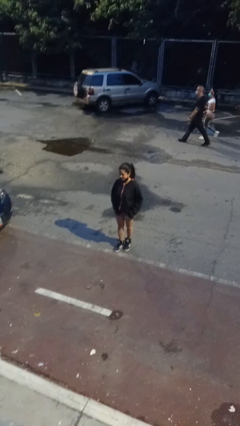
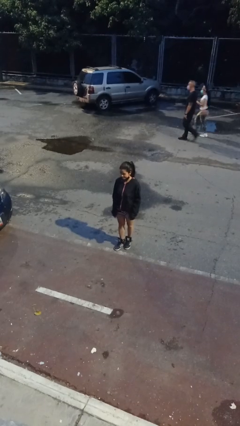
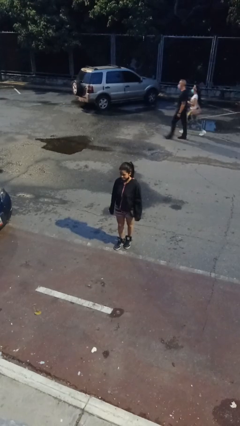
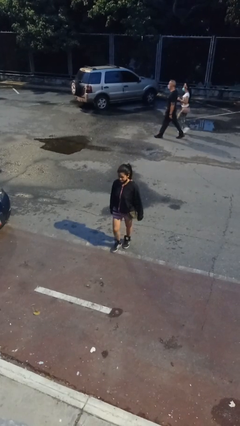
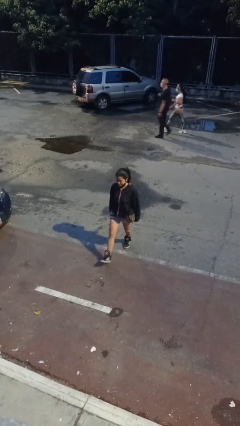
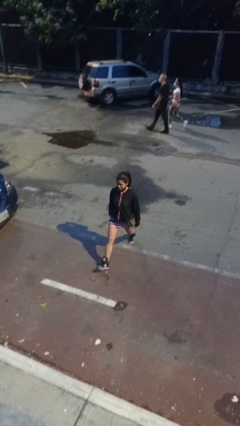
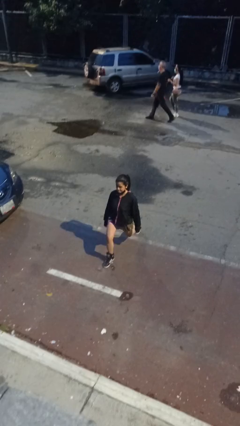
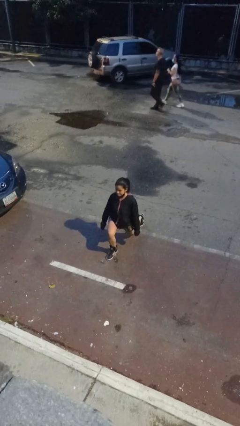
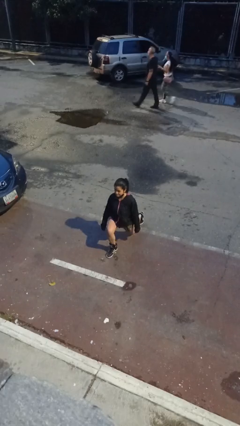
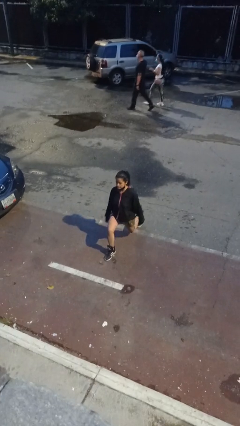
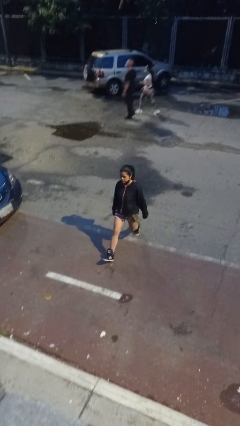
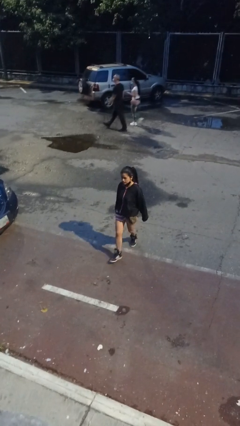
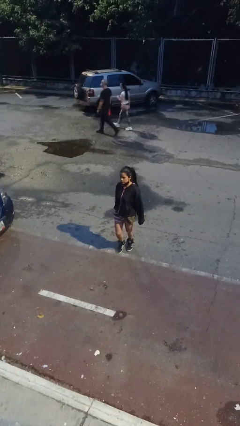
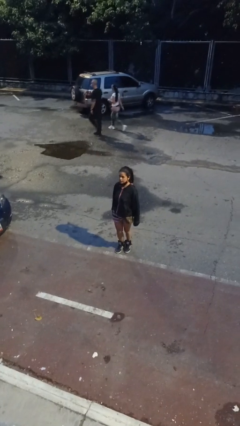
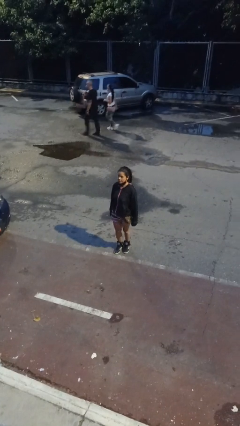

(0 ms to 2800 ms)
person exercises with lunges

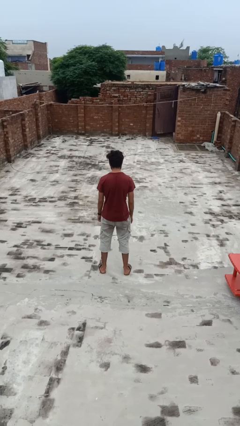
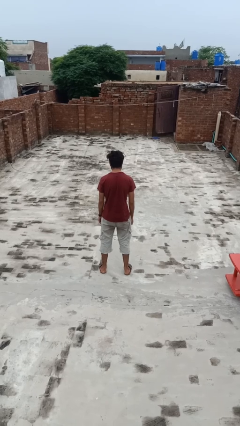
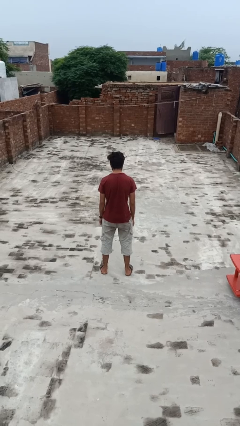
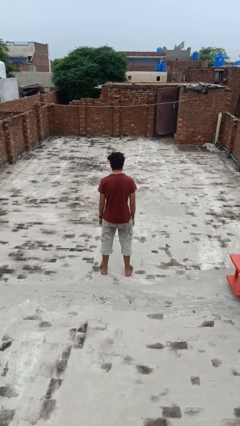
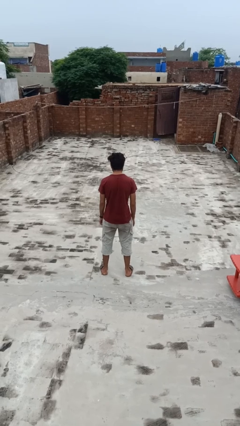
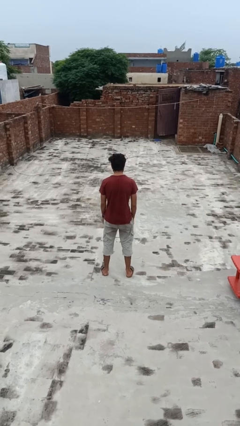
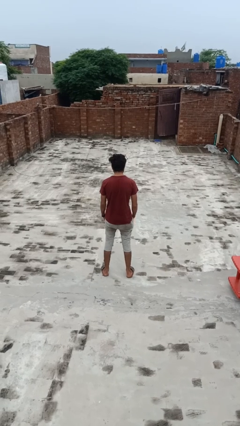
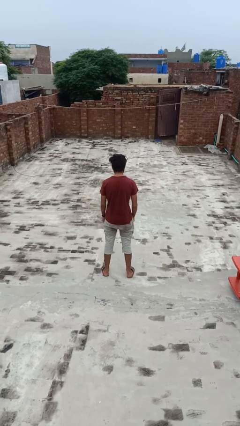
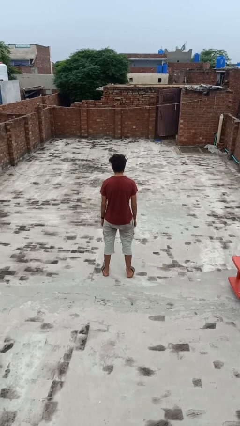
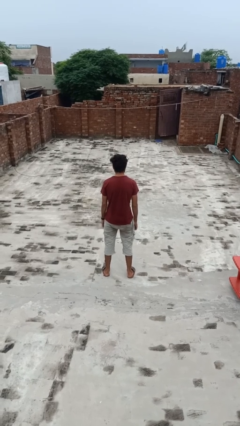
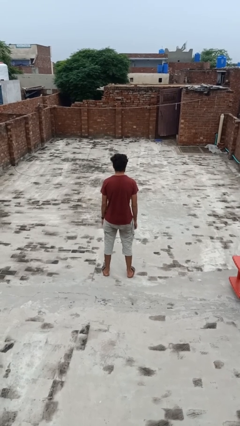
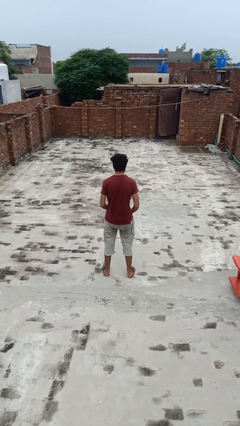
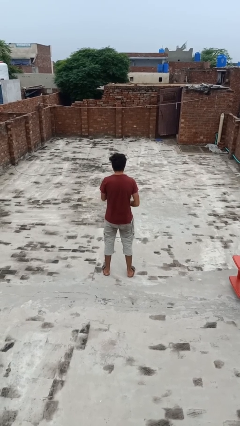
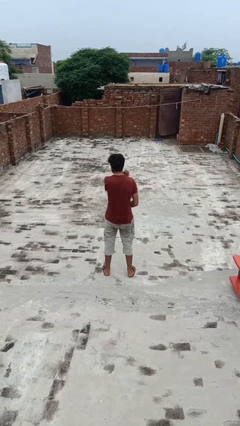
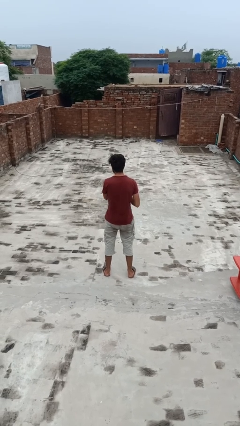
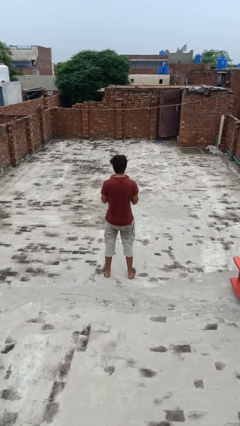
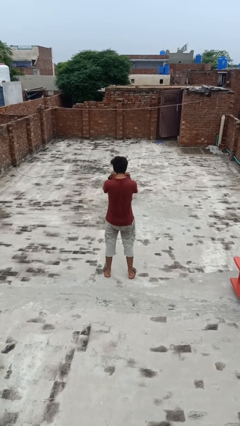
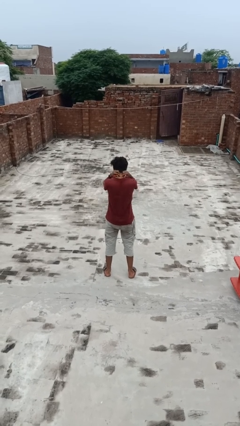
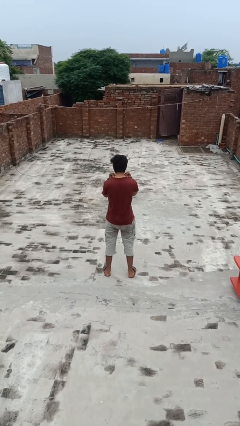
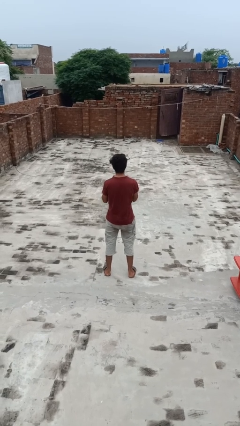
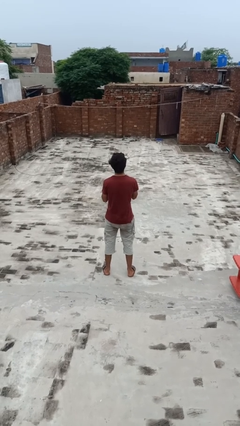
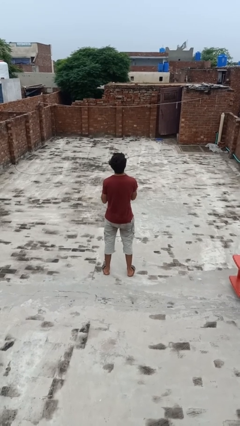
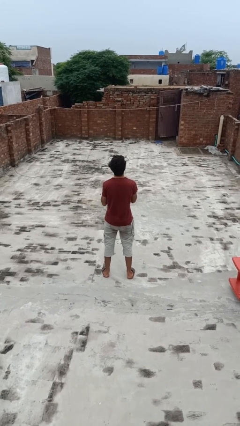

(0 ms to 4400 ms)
person strokes chin

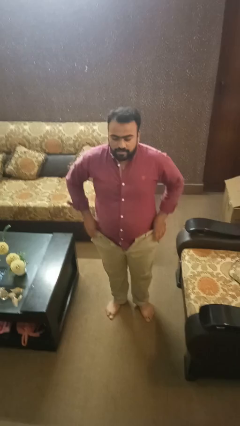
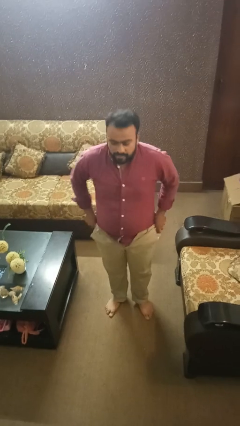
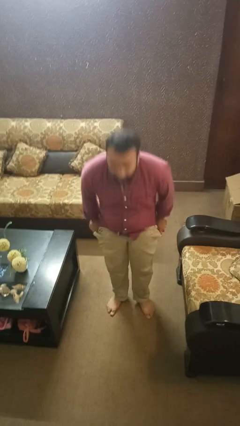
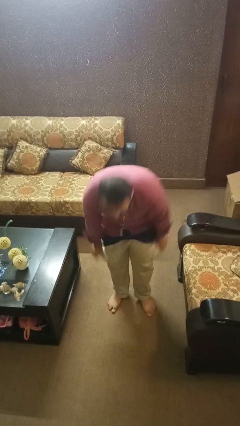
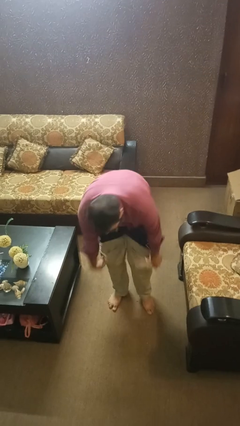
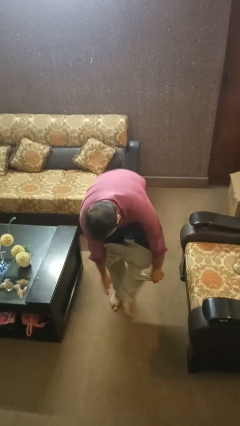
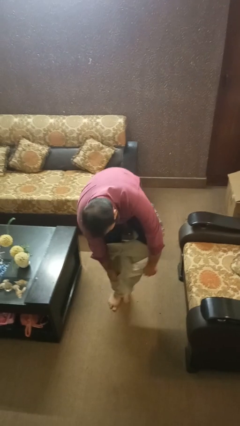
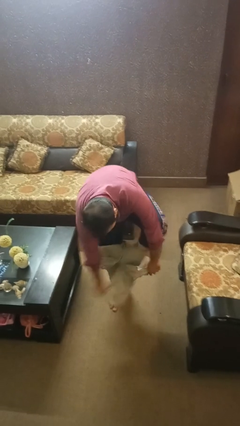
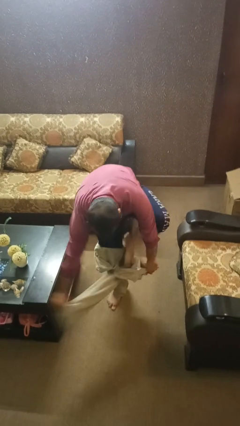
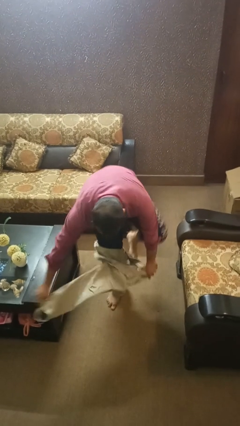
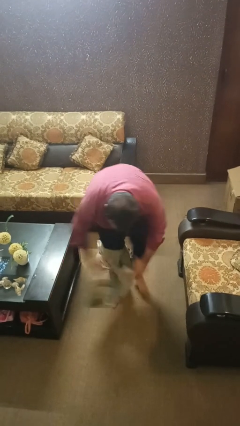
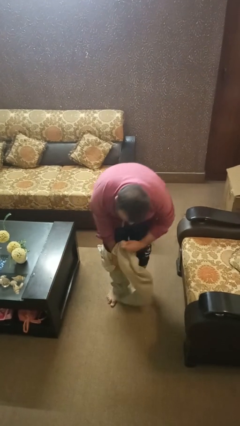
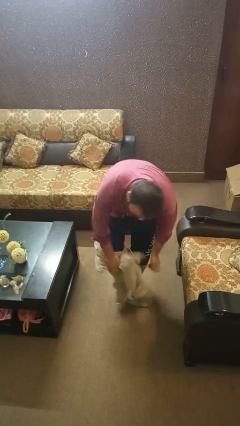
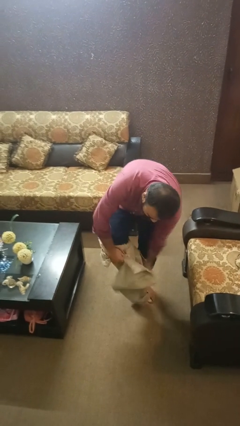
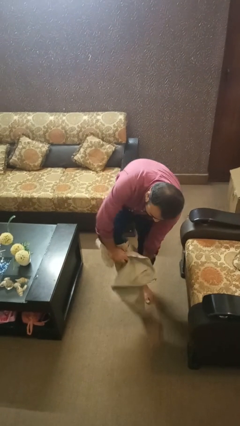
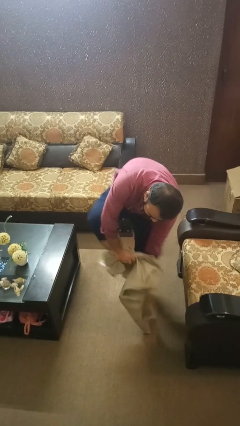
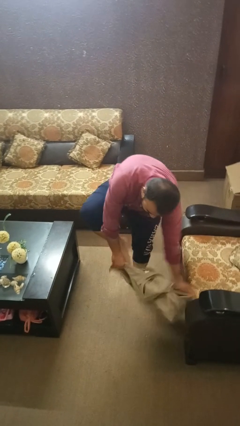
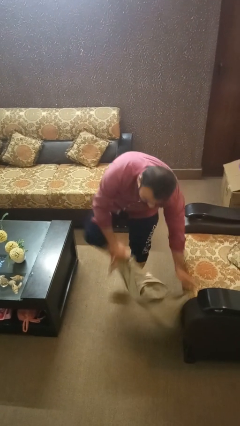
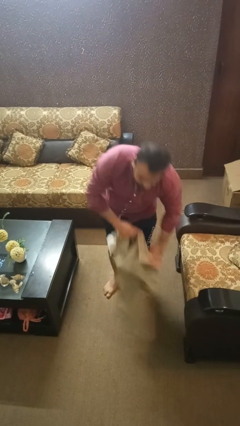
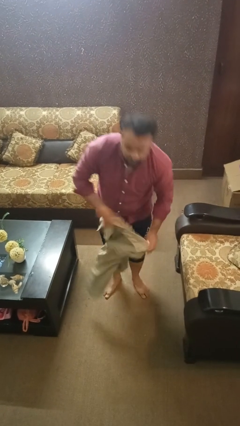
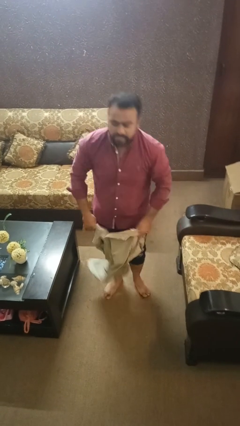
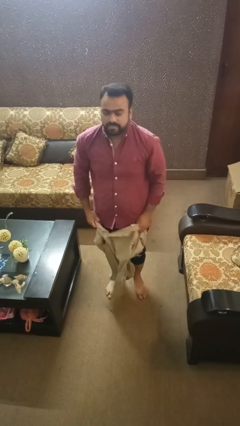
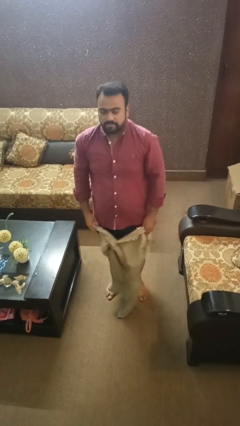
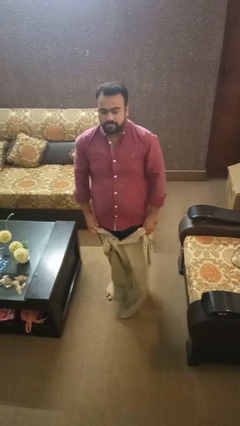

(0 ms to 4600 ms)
person takes off pants

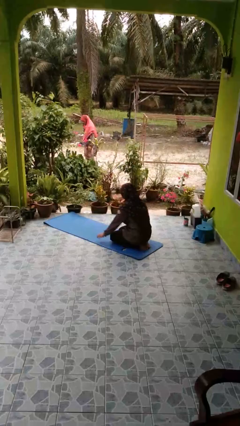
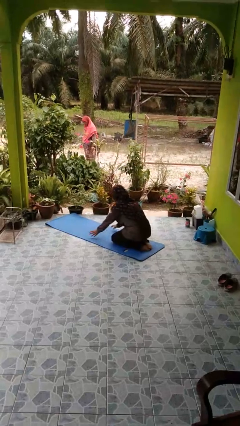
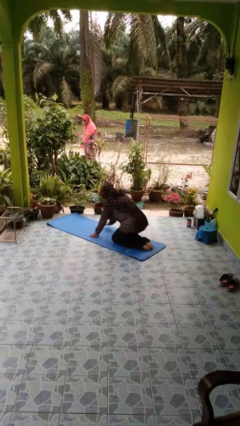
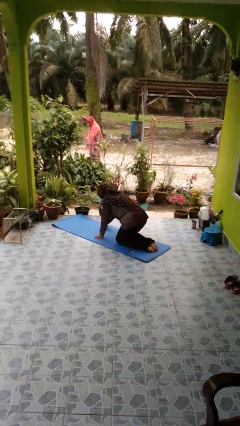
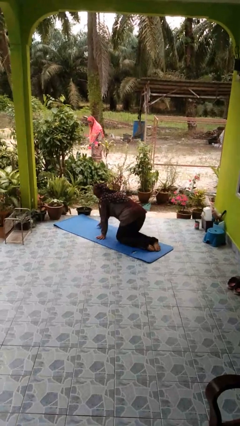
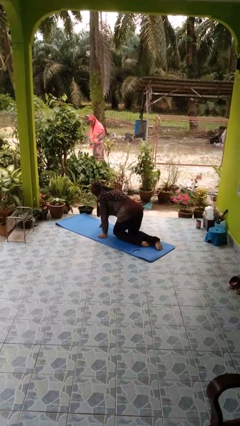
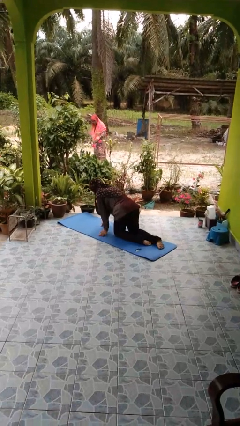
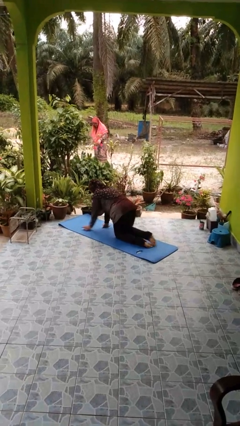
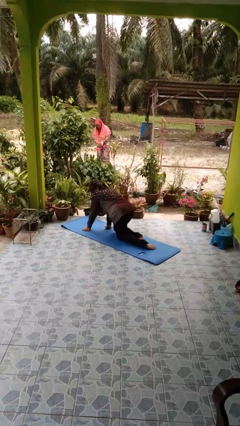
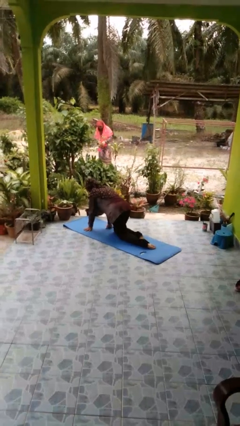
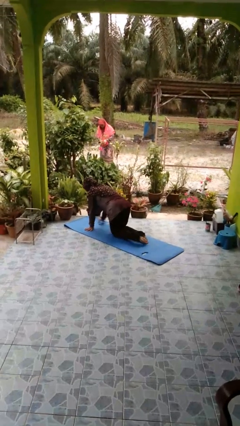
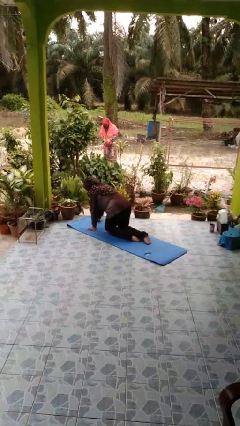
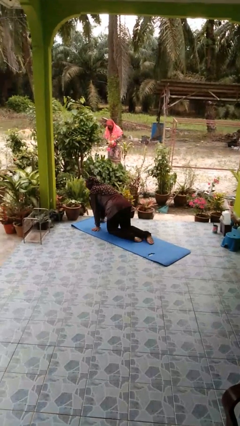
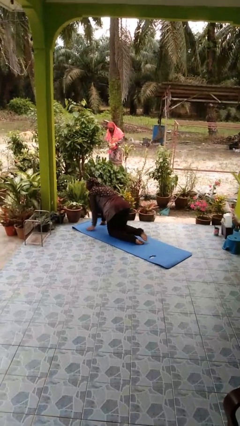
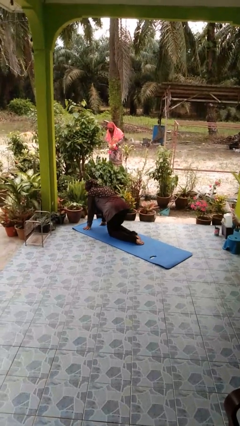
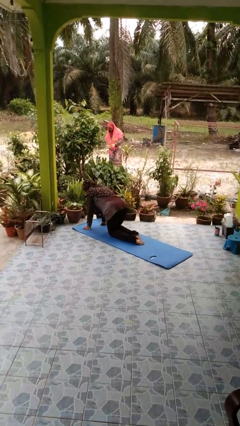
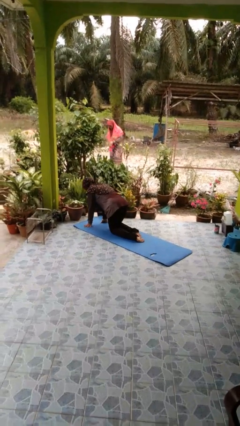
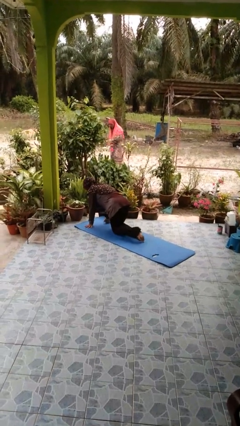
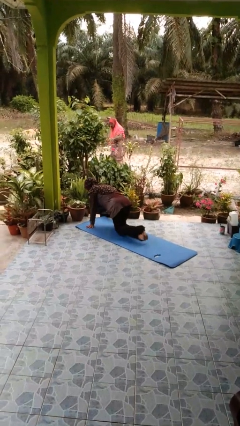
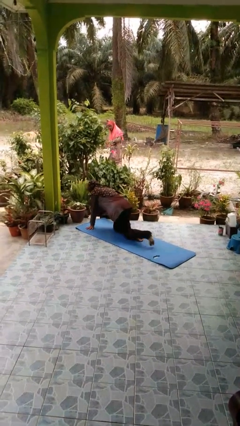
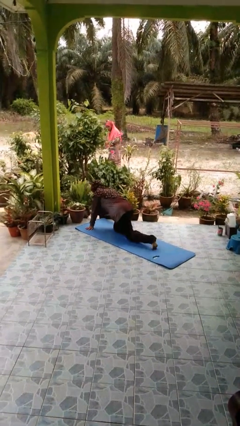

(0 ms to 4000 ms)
person crawls

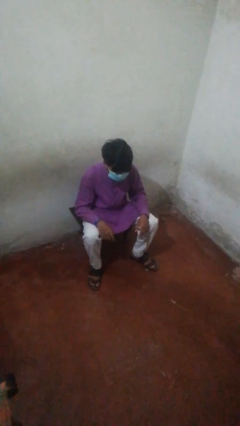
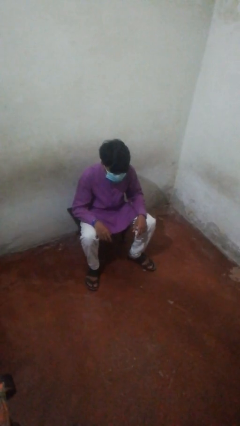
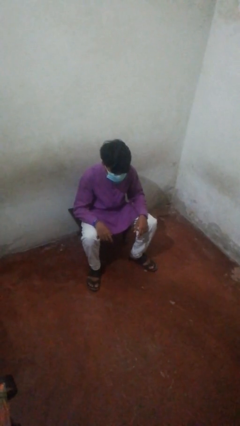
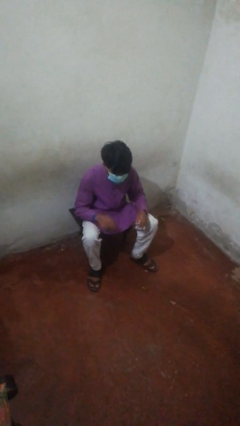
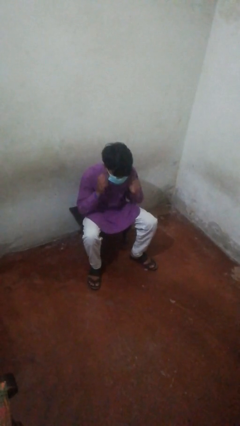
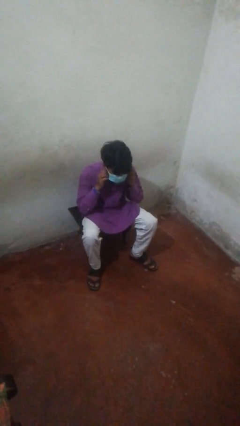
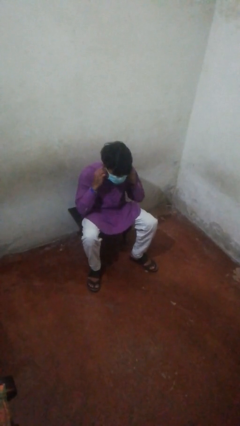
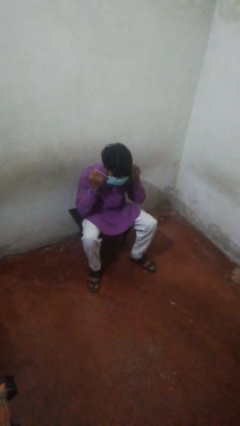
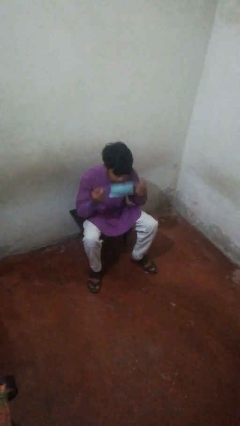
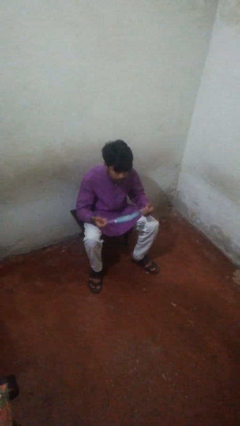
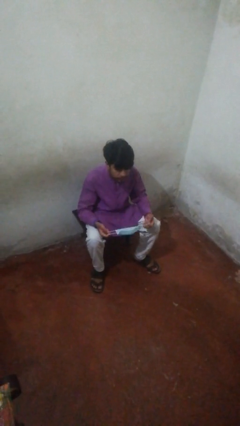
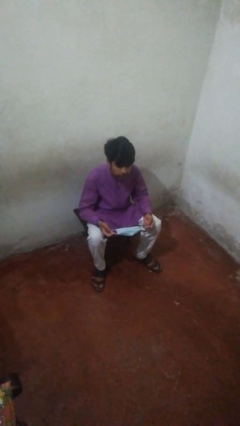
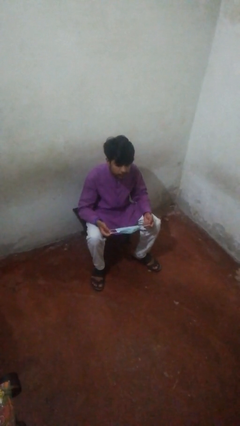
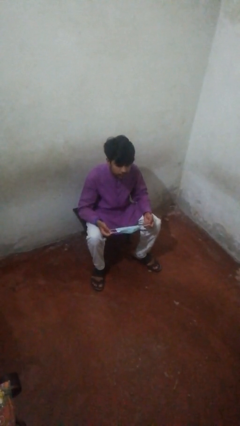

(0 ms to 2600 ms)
person takes off facemask
